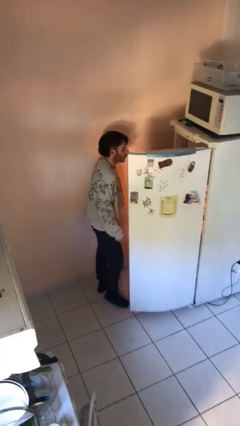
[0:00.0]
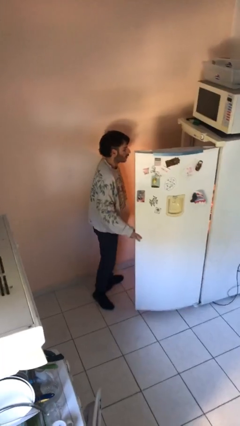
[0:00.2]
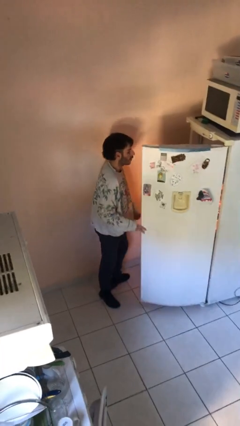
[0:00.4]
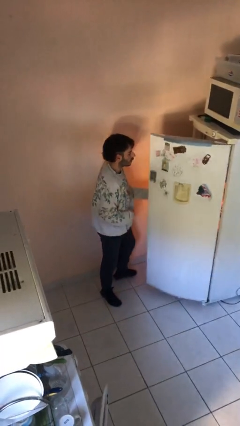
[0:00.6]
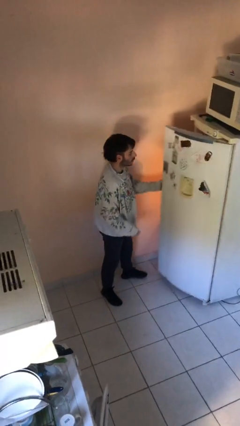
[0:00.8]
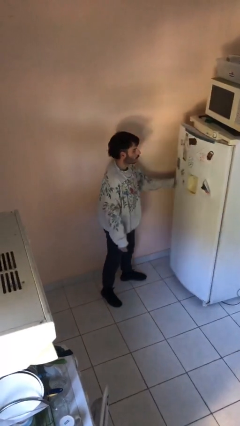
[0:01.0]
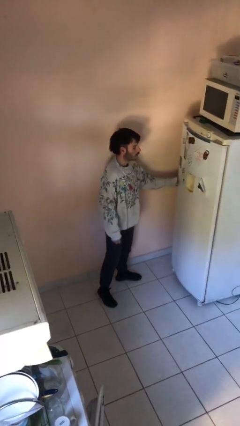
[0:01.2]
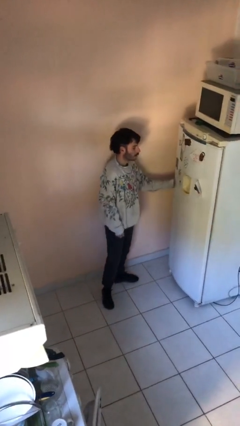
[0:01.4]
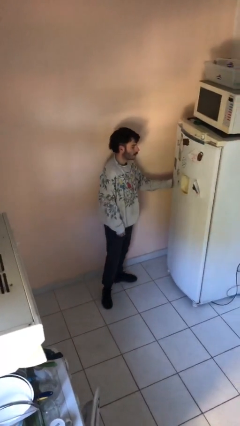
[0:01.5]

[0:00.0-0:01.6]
person closes refrigerator

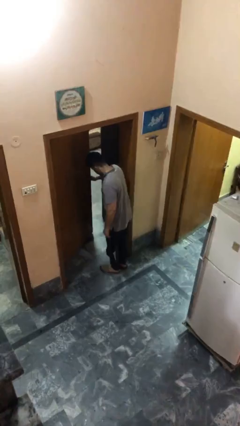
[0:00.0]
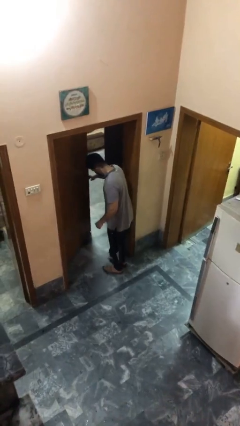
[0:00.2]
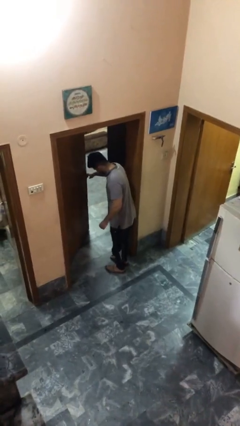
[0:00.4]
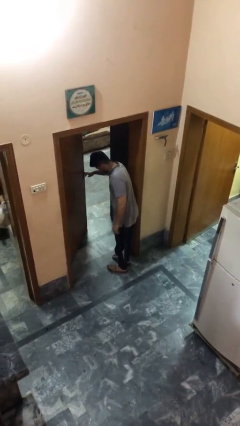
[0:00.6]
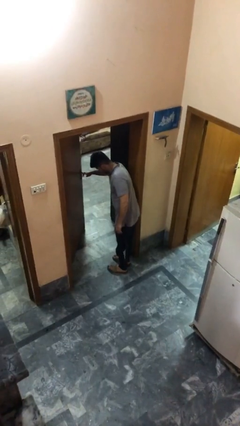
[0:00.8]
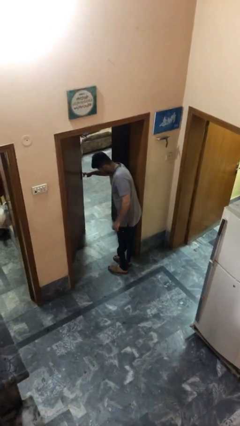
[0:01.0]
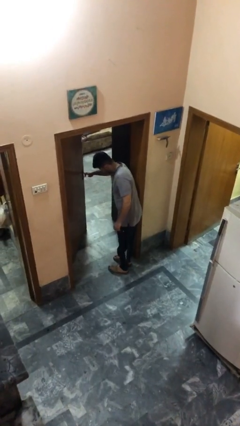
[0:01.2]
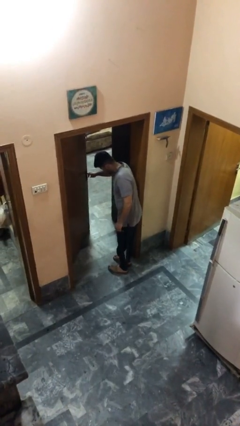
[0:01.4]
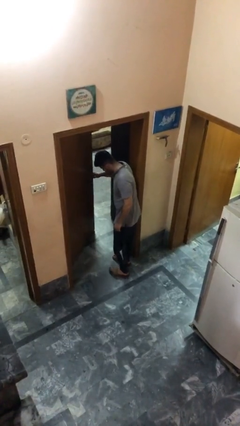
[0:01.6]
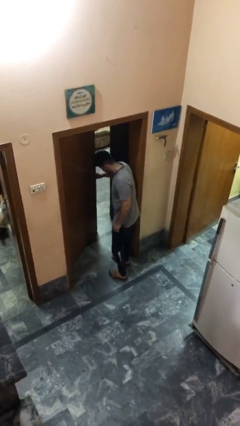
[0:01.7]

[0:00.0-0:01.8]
person opens facility door

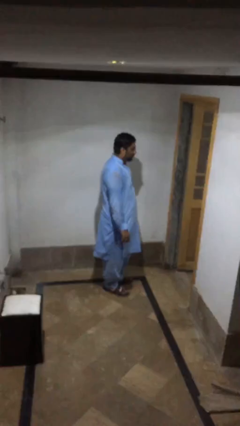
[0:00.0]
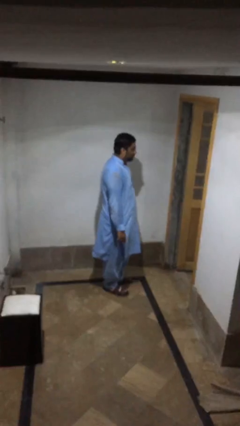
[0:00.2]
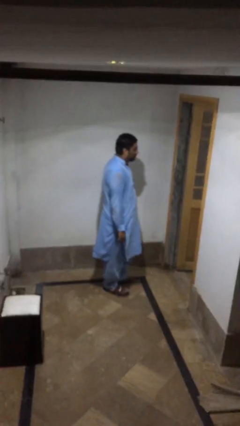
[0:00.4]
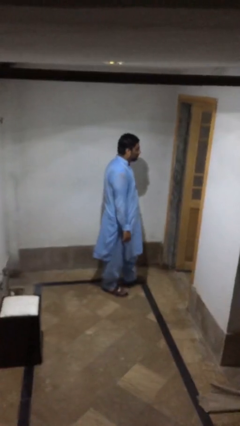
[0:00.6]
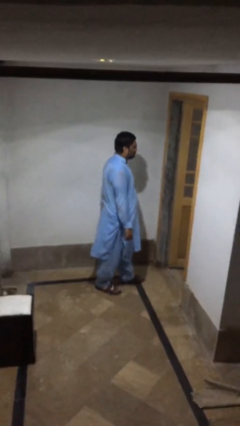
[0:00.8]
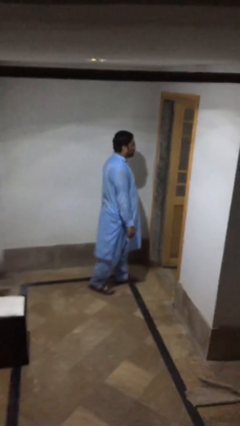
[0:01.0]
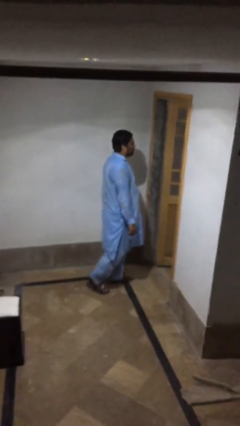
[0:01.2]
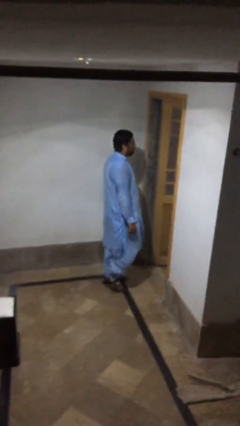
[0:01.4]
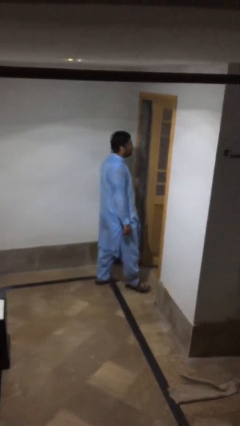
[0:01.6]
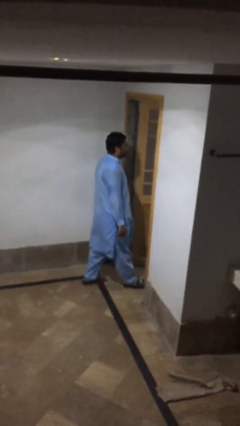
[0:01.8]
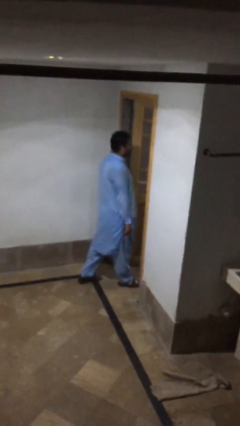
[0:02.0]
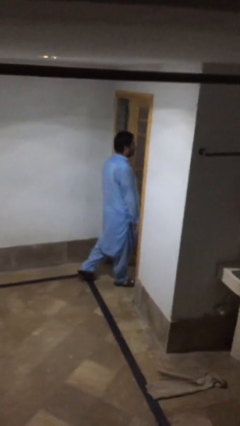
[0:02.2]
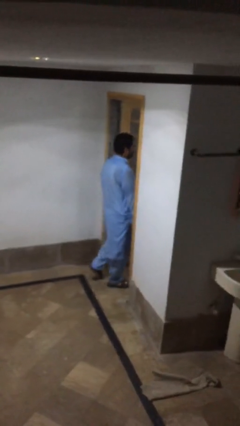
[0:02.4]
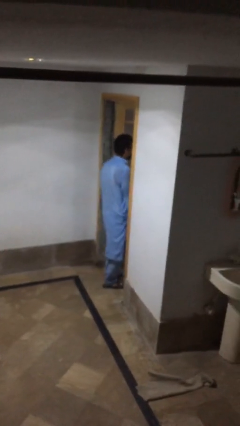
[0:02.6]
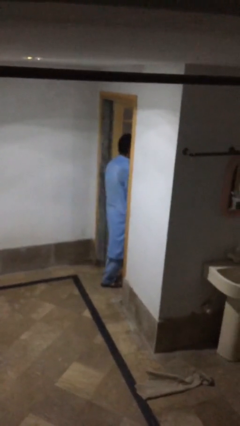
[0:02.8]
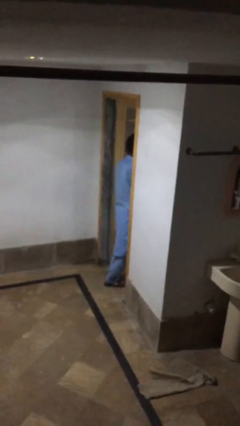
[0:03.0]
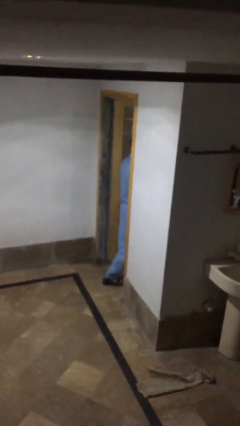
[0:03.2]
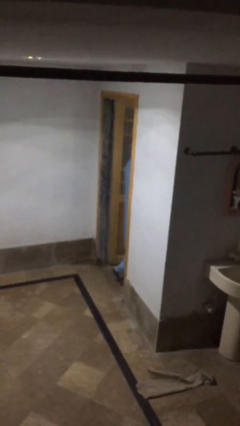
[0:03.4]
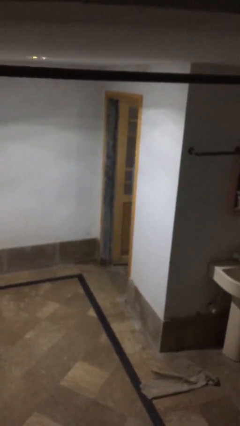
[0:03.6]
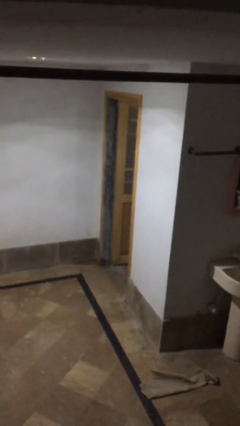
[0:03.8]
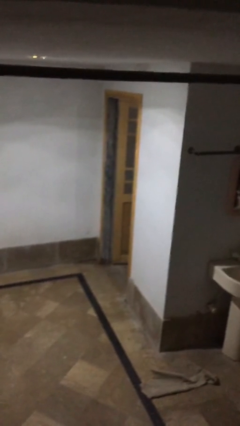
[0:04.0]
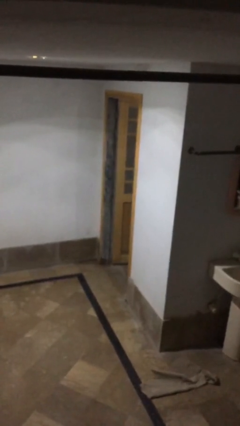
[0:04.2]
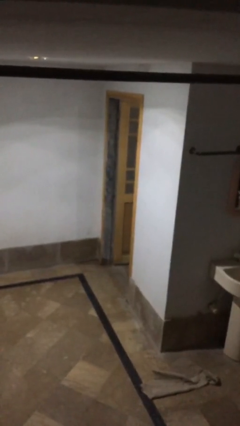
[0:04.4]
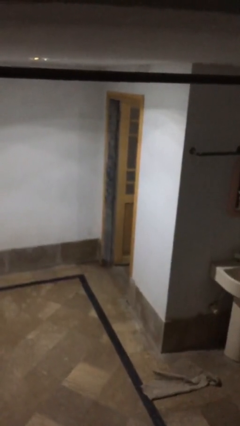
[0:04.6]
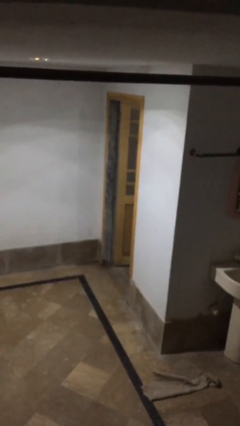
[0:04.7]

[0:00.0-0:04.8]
person exits scene through structure

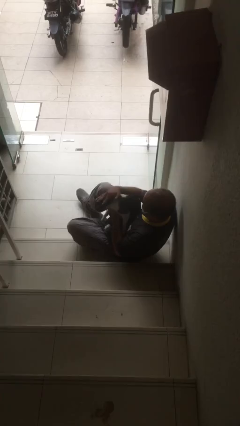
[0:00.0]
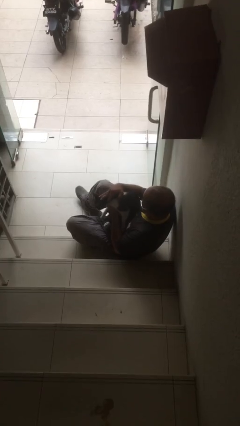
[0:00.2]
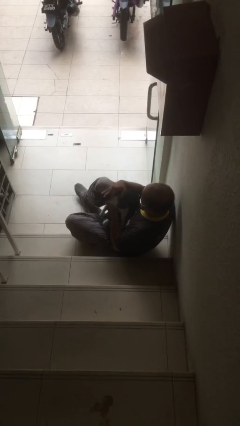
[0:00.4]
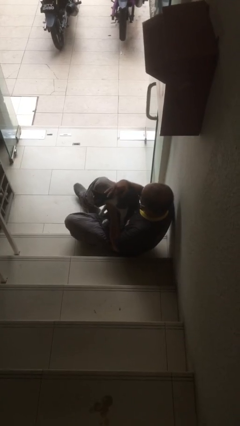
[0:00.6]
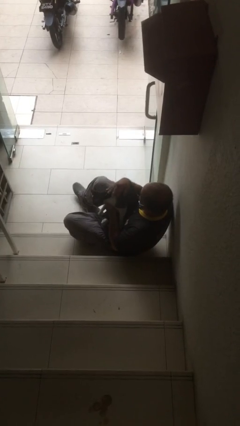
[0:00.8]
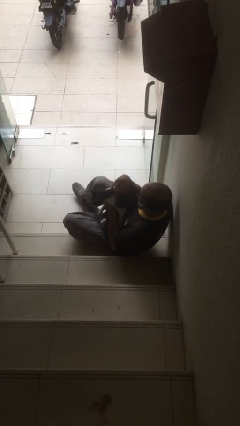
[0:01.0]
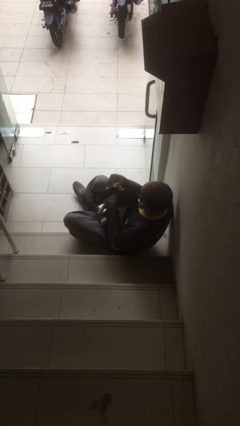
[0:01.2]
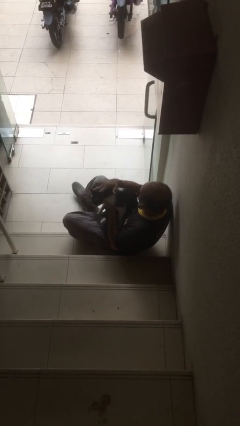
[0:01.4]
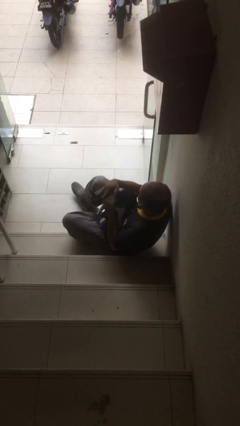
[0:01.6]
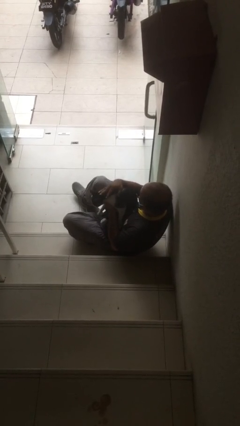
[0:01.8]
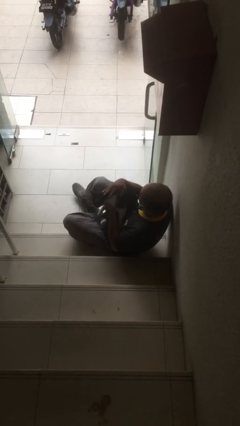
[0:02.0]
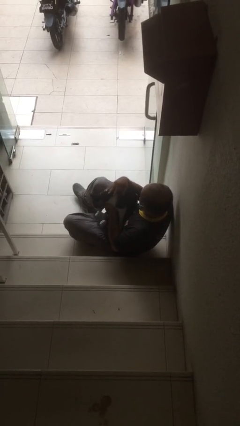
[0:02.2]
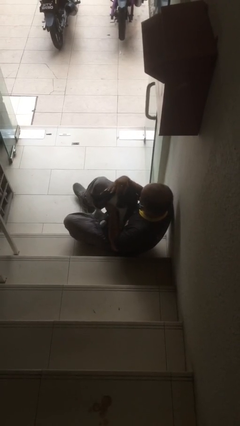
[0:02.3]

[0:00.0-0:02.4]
person pets cat

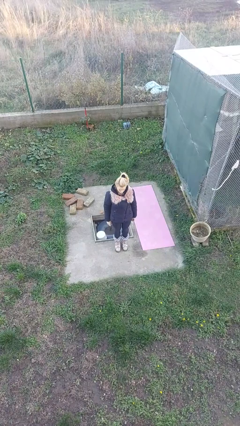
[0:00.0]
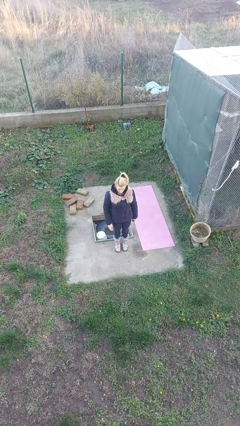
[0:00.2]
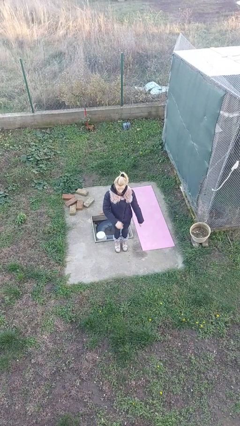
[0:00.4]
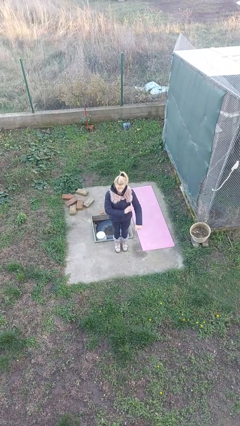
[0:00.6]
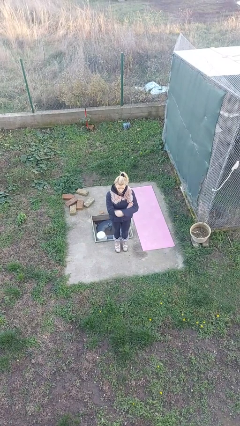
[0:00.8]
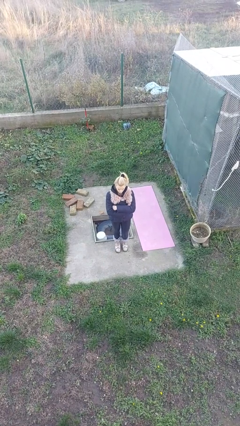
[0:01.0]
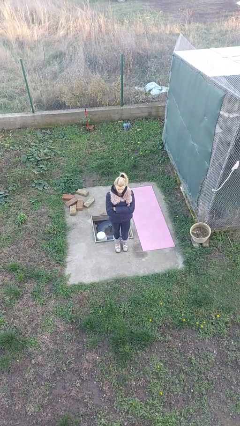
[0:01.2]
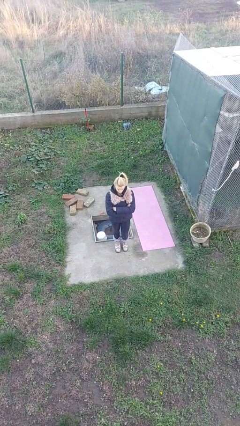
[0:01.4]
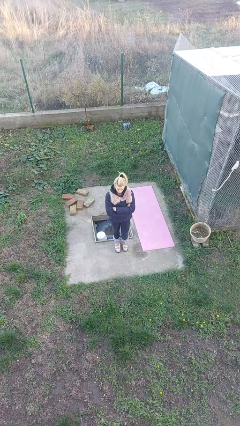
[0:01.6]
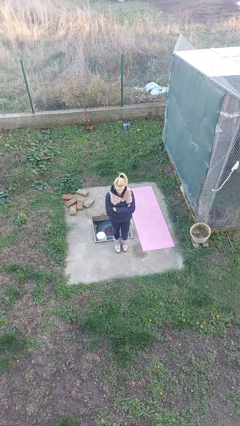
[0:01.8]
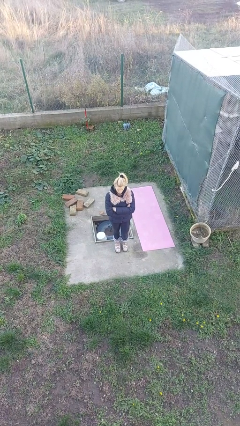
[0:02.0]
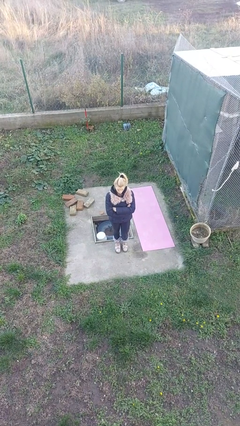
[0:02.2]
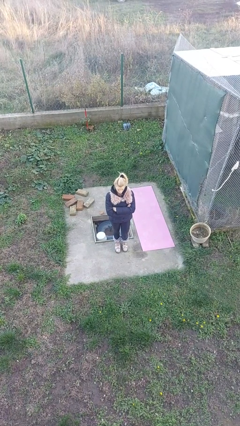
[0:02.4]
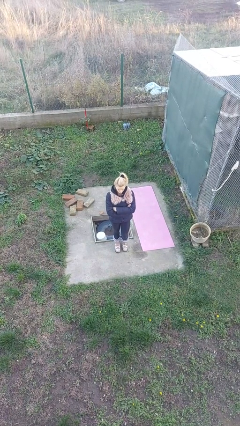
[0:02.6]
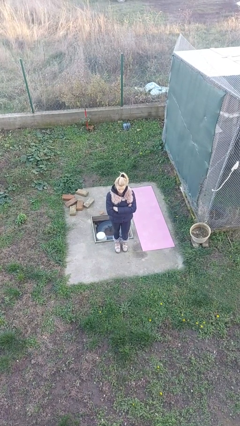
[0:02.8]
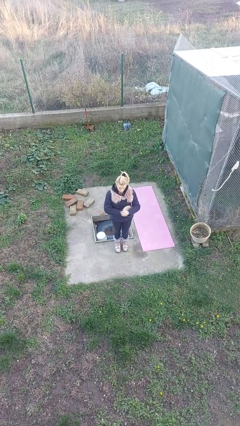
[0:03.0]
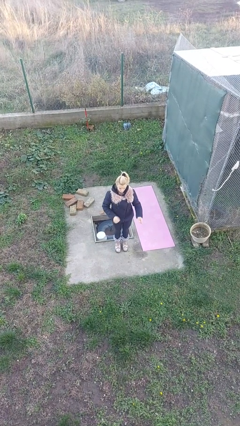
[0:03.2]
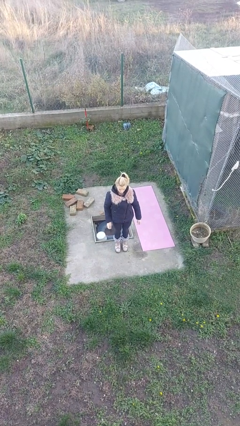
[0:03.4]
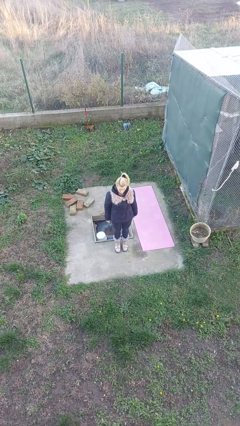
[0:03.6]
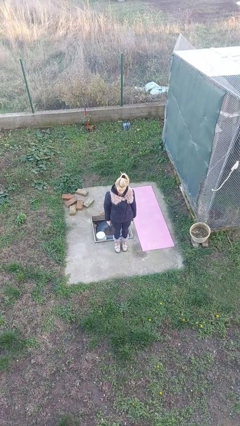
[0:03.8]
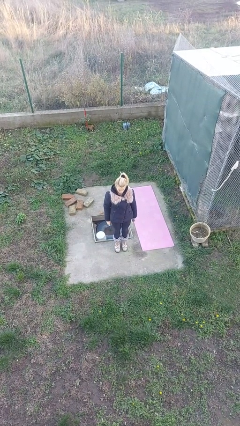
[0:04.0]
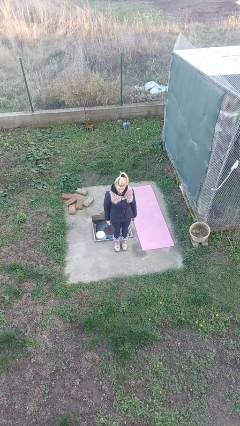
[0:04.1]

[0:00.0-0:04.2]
person crosses arms

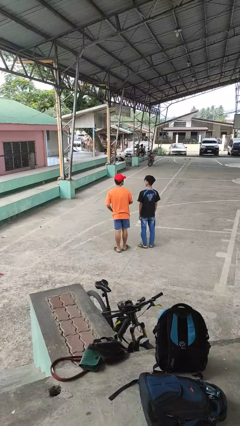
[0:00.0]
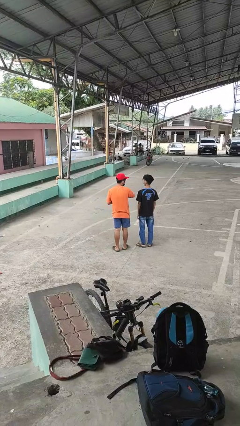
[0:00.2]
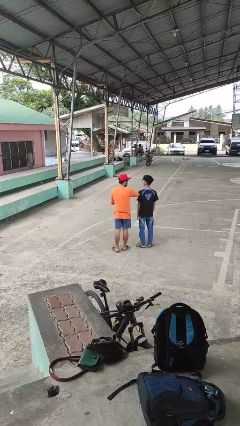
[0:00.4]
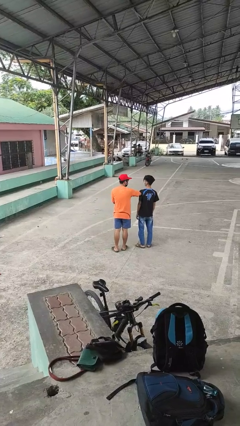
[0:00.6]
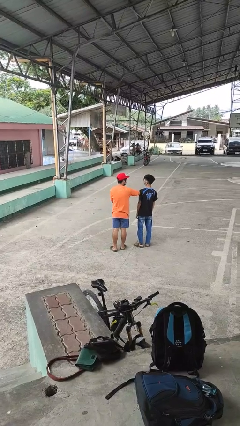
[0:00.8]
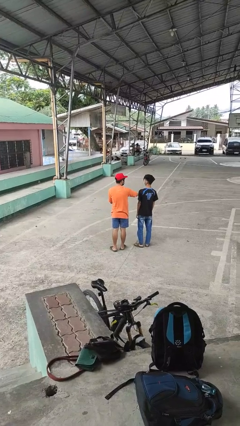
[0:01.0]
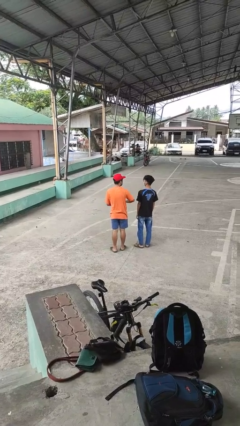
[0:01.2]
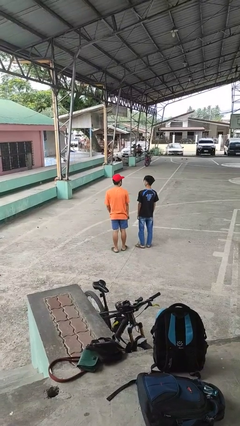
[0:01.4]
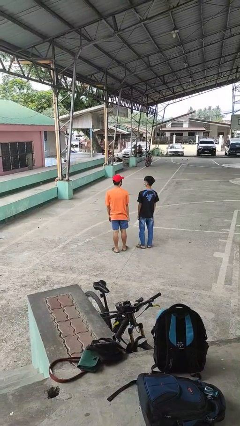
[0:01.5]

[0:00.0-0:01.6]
person nudges person with elbow

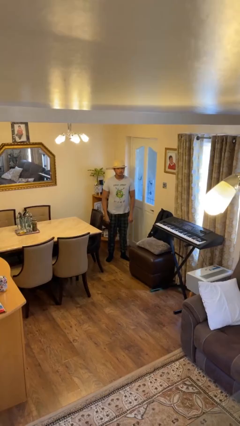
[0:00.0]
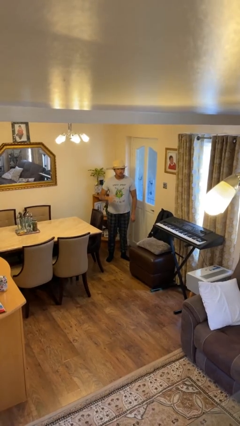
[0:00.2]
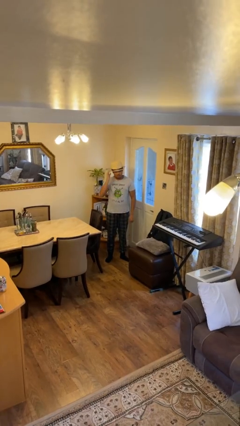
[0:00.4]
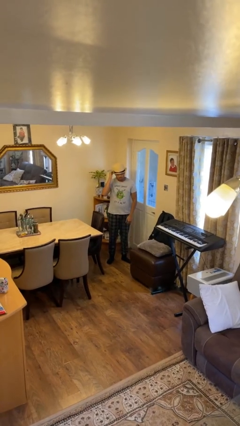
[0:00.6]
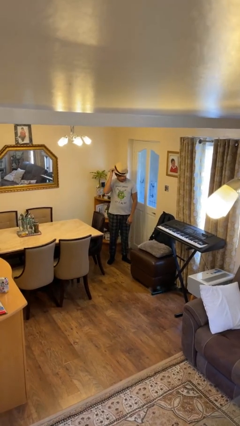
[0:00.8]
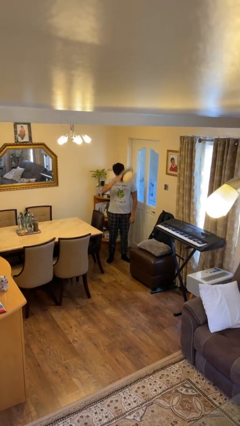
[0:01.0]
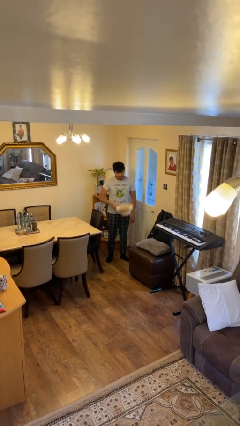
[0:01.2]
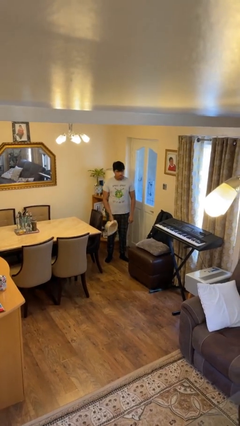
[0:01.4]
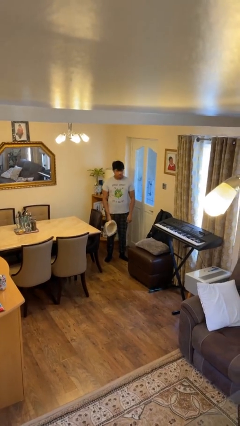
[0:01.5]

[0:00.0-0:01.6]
person takes off hat
